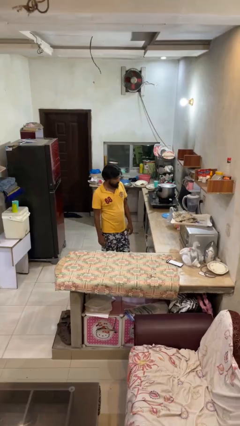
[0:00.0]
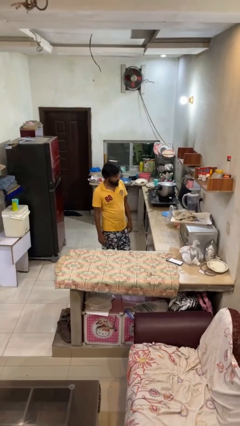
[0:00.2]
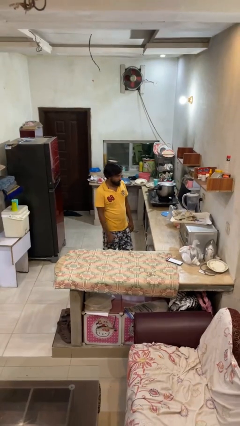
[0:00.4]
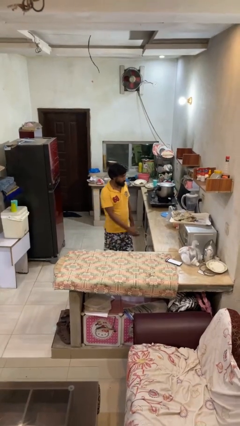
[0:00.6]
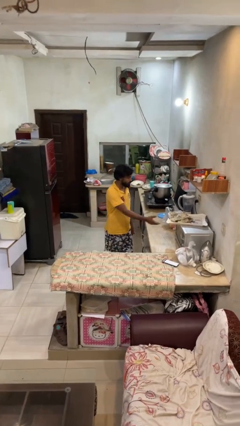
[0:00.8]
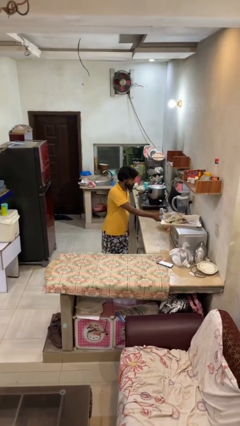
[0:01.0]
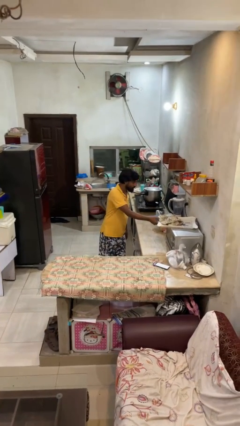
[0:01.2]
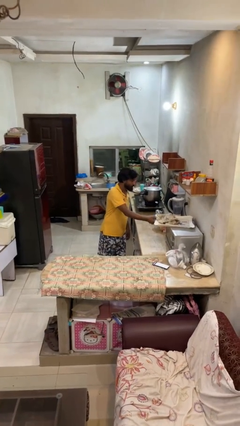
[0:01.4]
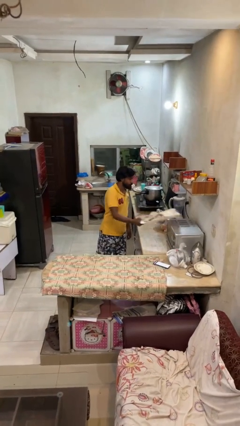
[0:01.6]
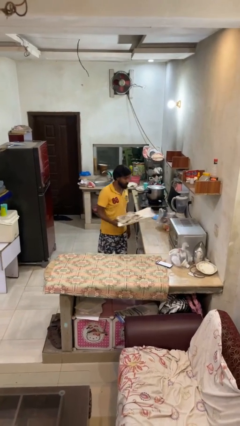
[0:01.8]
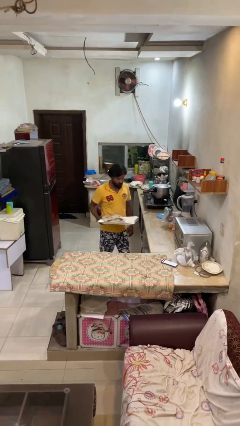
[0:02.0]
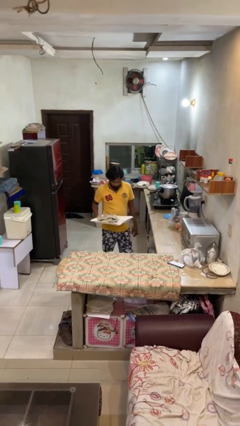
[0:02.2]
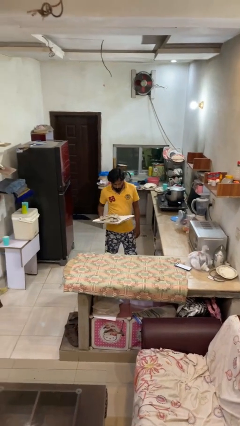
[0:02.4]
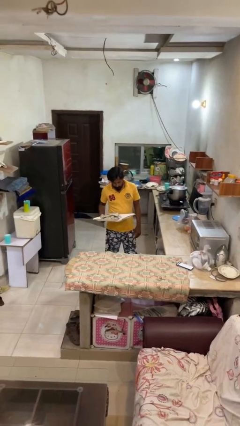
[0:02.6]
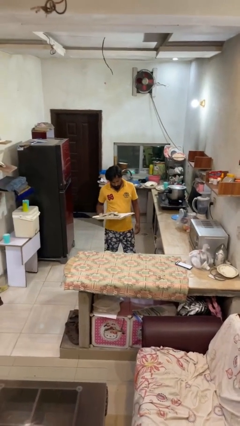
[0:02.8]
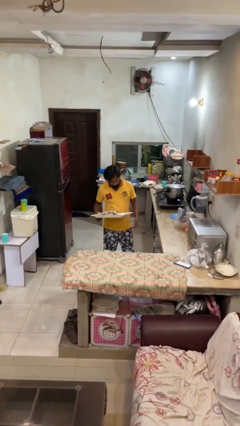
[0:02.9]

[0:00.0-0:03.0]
person picks up object from countertop

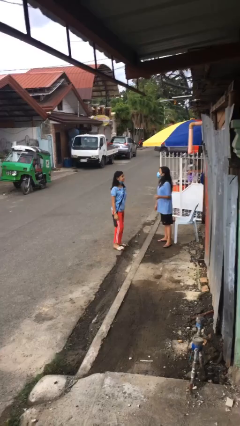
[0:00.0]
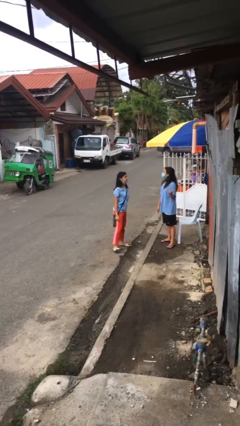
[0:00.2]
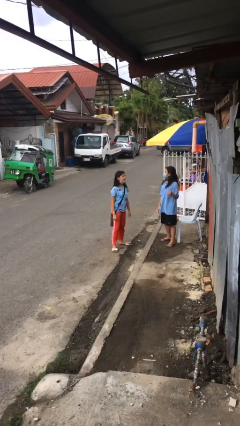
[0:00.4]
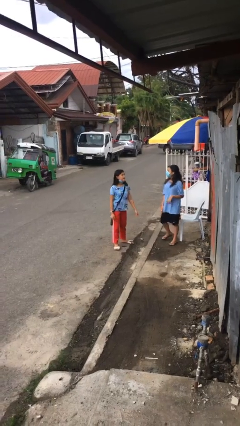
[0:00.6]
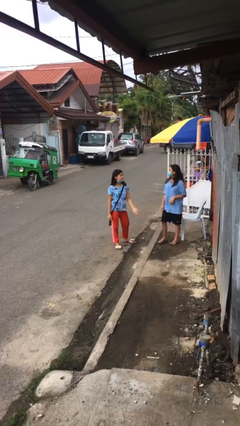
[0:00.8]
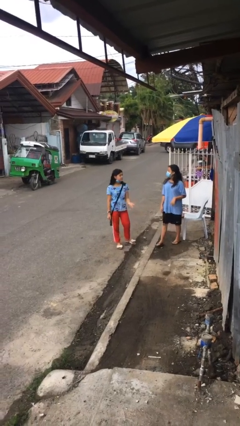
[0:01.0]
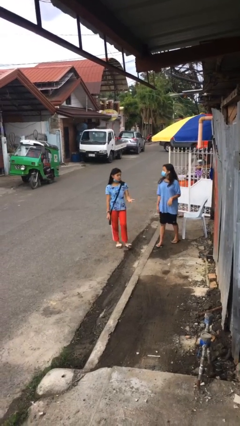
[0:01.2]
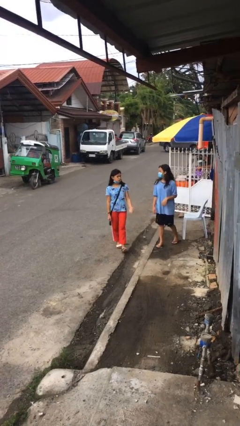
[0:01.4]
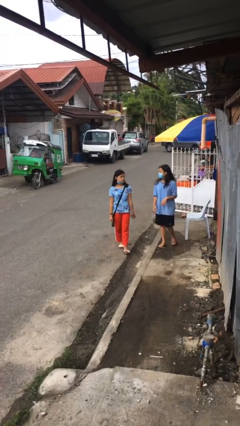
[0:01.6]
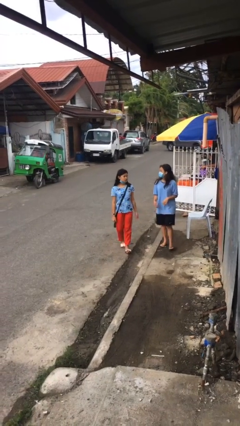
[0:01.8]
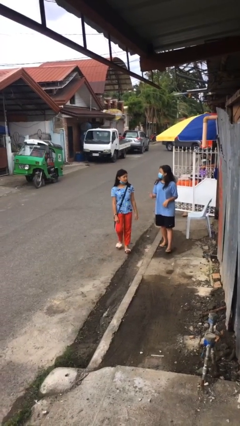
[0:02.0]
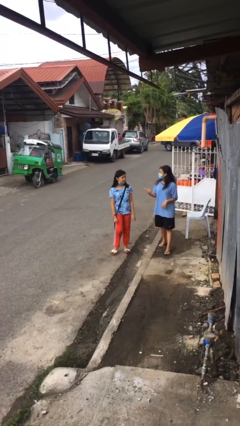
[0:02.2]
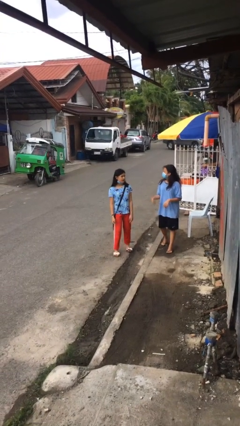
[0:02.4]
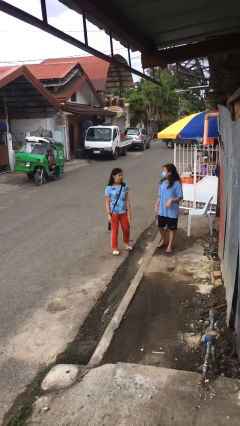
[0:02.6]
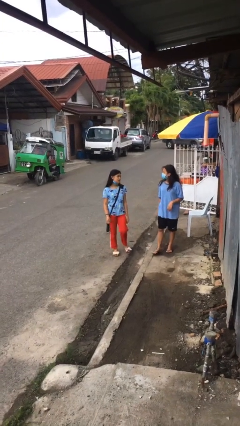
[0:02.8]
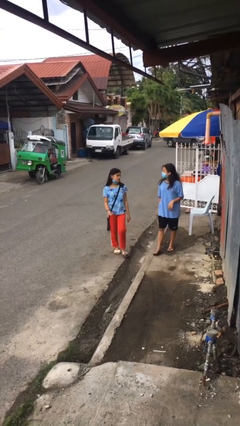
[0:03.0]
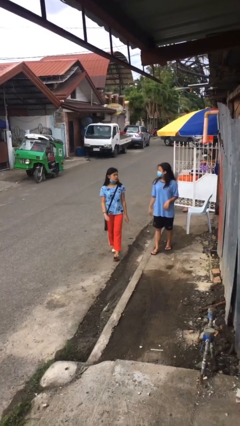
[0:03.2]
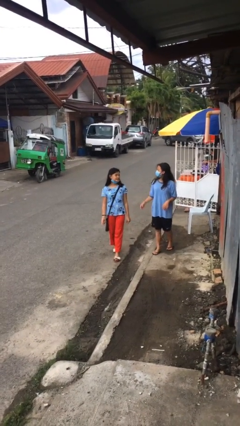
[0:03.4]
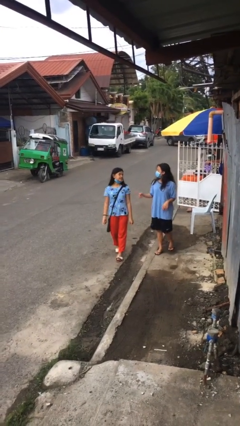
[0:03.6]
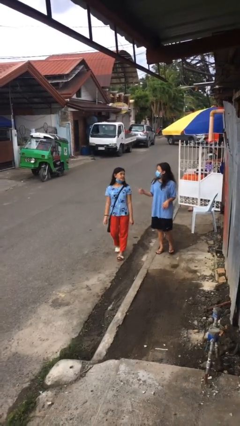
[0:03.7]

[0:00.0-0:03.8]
person talks to person

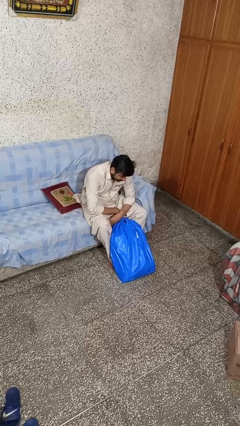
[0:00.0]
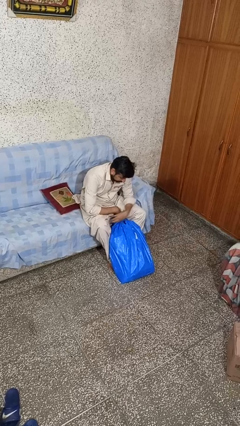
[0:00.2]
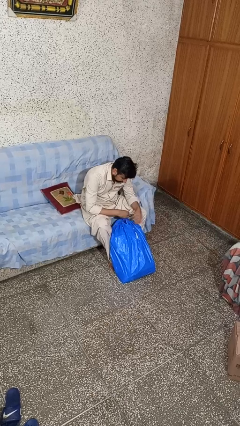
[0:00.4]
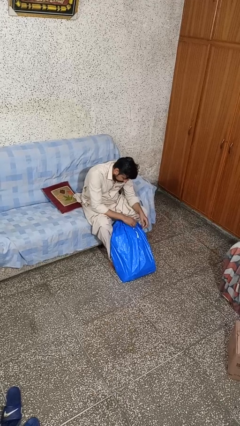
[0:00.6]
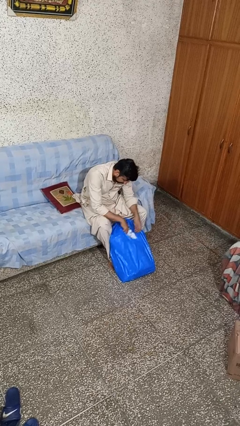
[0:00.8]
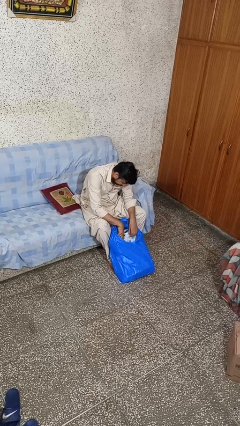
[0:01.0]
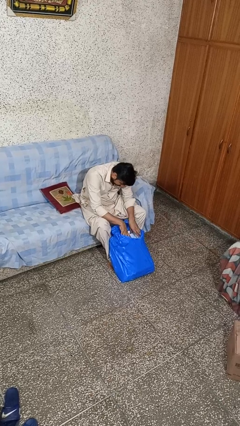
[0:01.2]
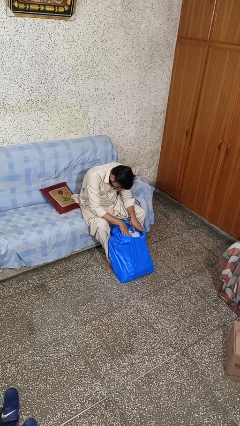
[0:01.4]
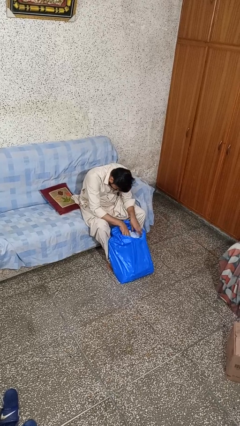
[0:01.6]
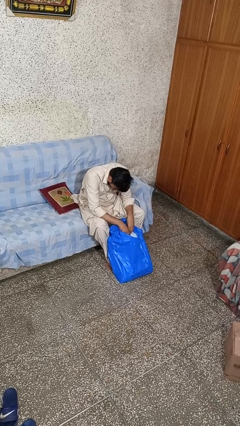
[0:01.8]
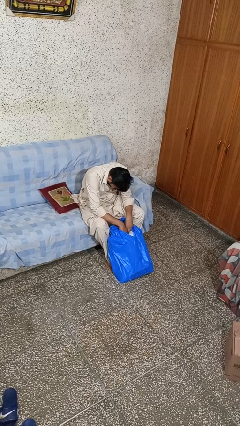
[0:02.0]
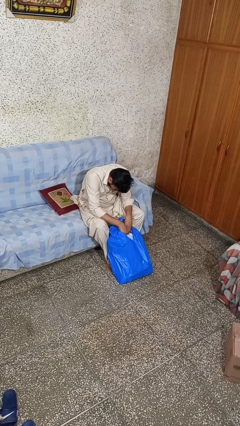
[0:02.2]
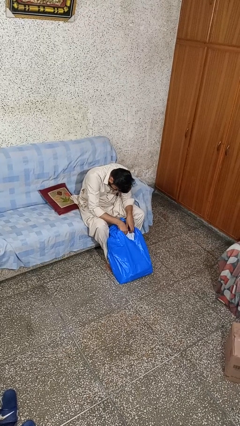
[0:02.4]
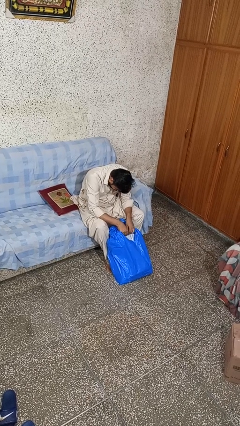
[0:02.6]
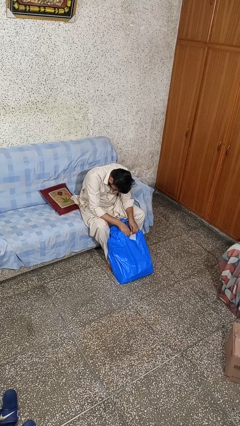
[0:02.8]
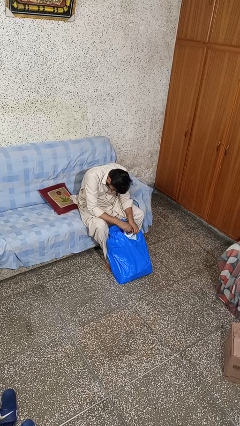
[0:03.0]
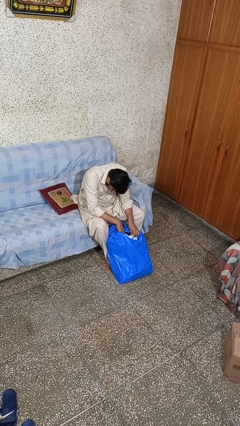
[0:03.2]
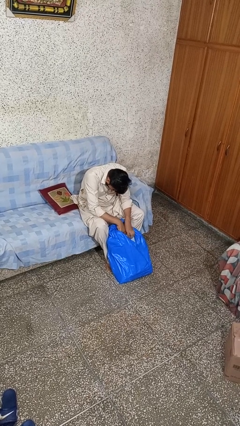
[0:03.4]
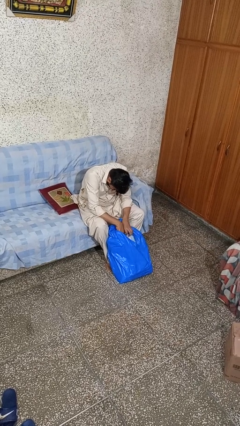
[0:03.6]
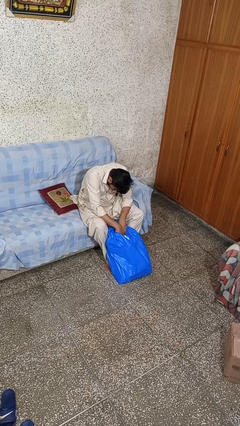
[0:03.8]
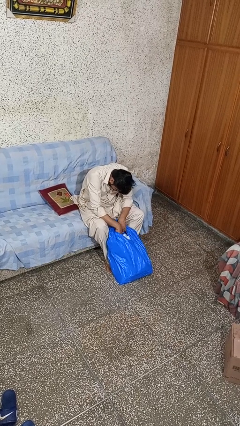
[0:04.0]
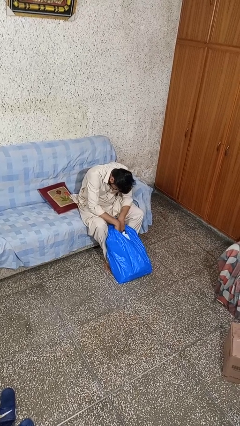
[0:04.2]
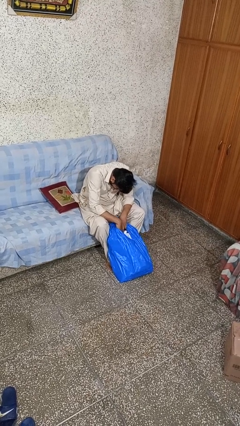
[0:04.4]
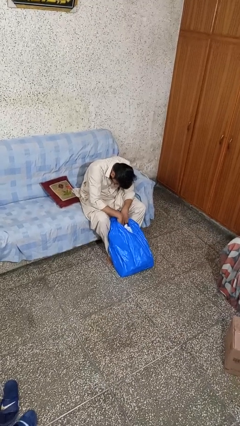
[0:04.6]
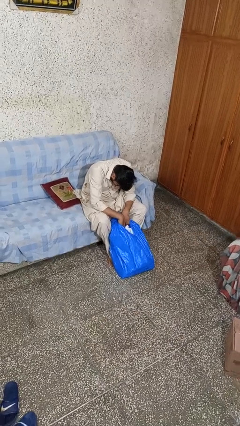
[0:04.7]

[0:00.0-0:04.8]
person searches in bag

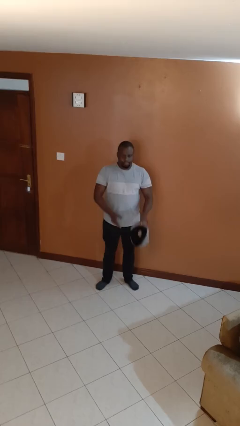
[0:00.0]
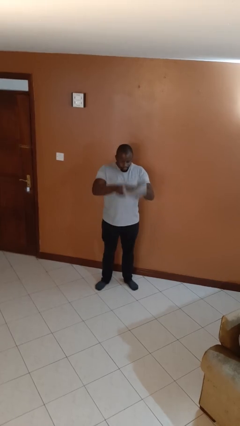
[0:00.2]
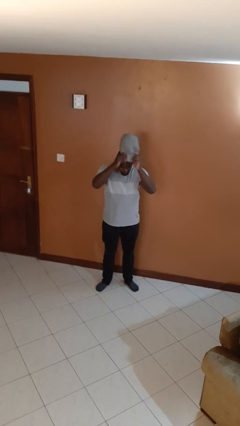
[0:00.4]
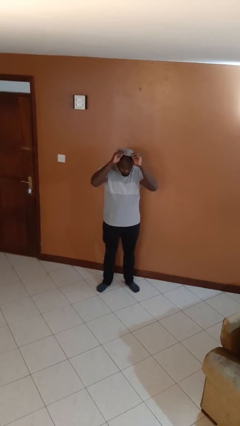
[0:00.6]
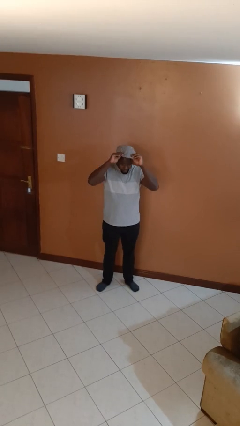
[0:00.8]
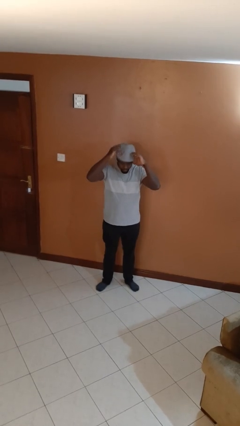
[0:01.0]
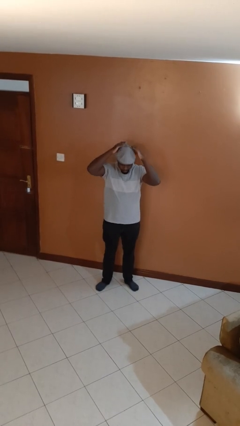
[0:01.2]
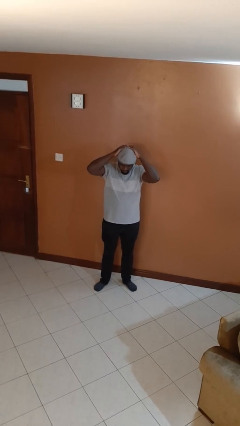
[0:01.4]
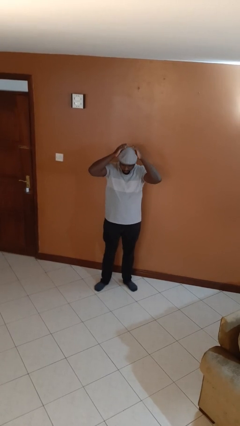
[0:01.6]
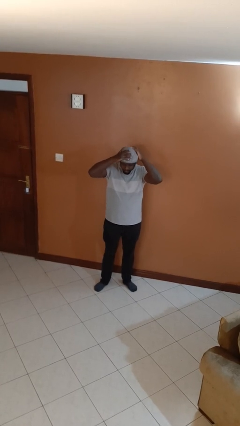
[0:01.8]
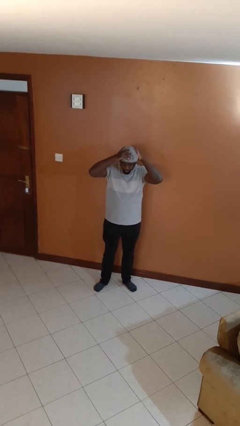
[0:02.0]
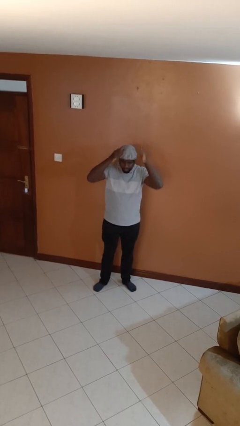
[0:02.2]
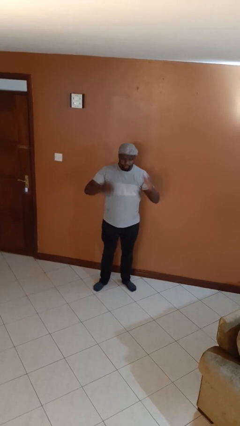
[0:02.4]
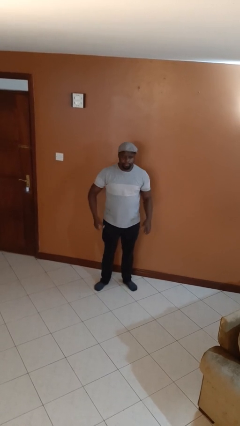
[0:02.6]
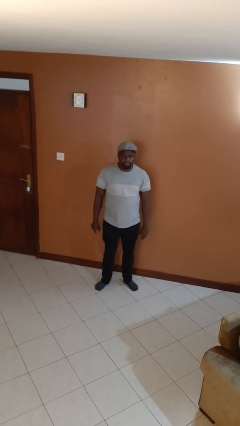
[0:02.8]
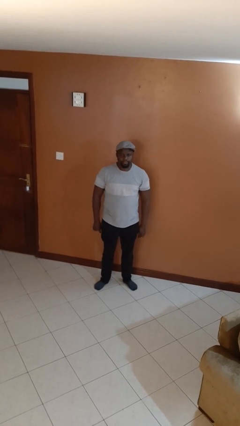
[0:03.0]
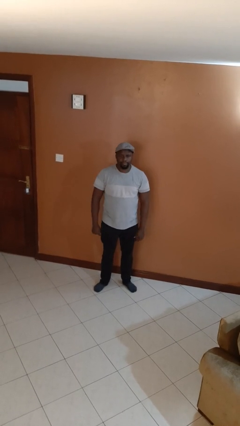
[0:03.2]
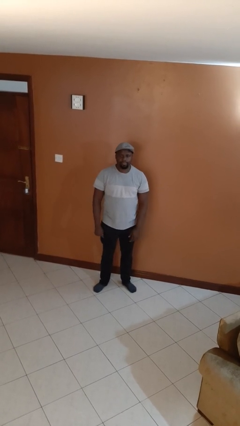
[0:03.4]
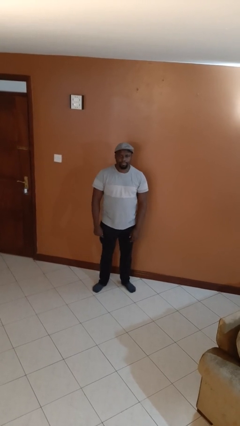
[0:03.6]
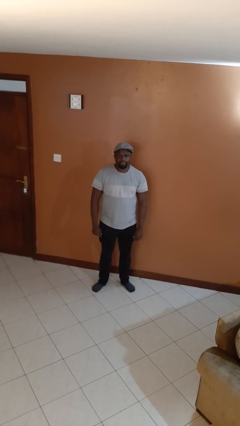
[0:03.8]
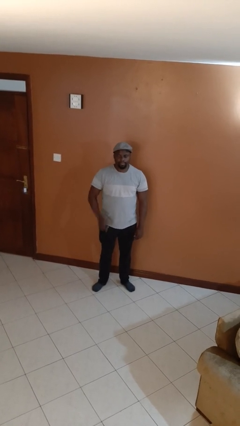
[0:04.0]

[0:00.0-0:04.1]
person puts on hat

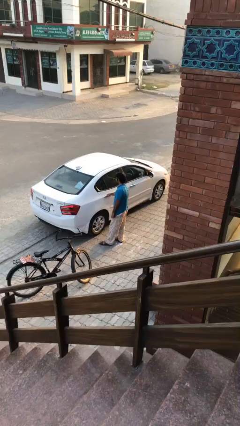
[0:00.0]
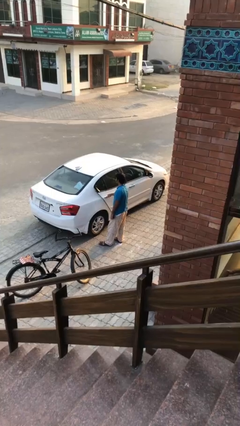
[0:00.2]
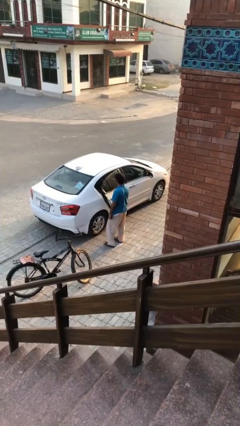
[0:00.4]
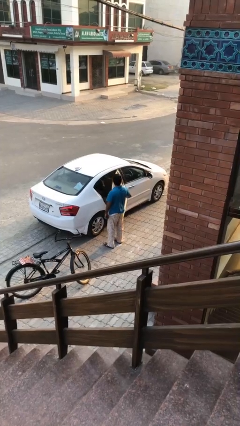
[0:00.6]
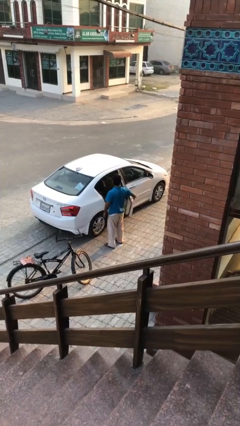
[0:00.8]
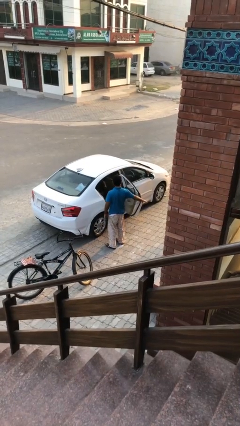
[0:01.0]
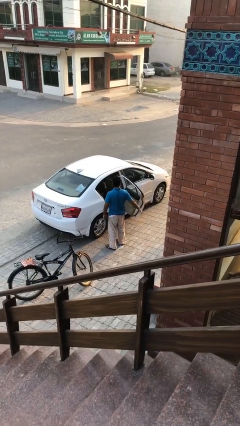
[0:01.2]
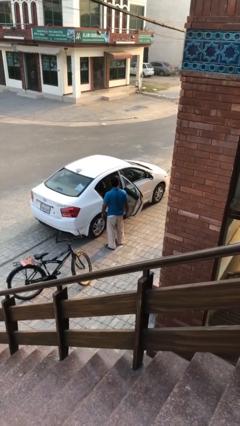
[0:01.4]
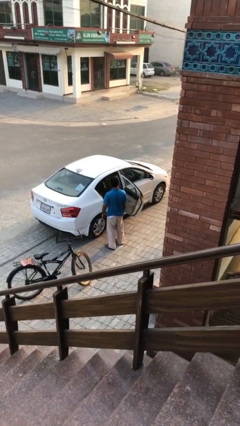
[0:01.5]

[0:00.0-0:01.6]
person opens car door

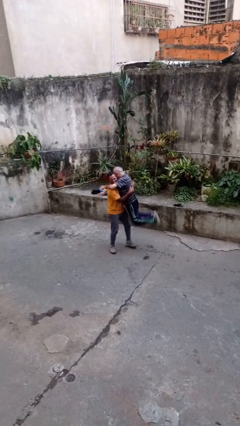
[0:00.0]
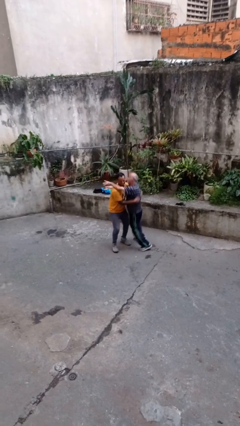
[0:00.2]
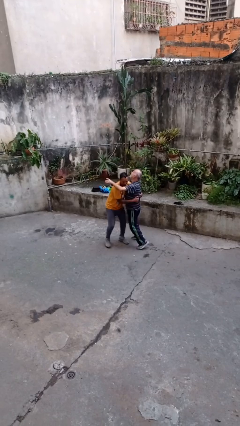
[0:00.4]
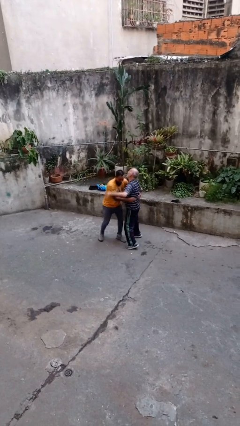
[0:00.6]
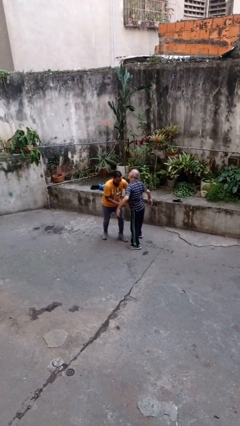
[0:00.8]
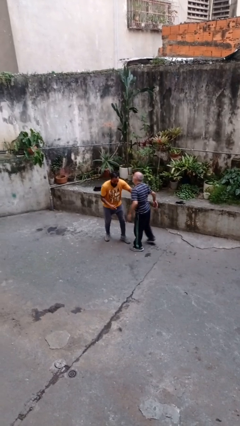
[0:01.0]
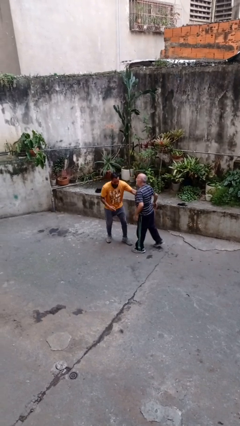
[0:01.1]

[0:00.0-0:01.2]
person puts down person
